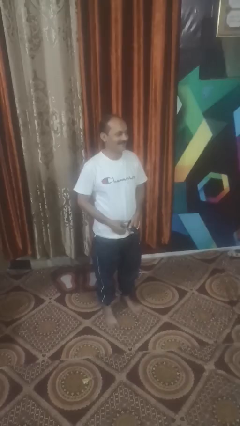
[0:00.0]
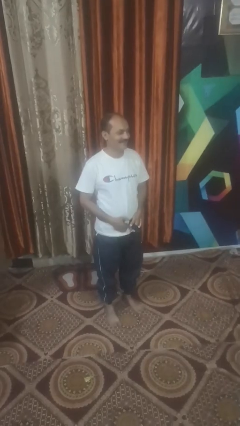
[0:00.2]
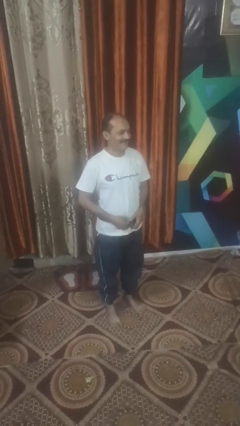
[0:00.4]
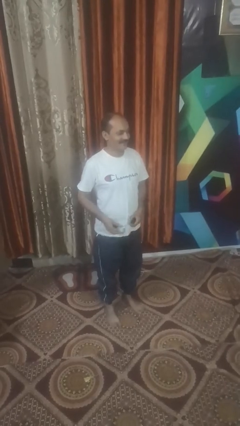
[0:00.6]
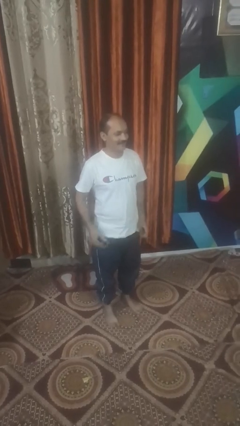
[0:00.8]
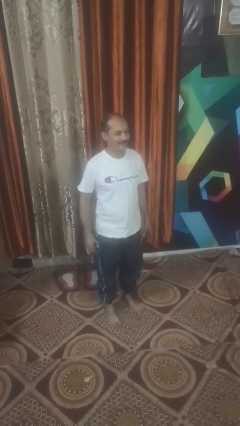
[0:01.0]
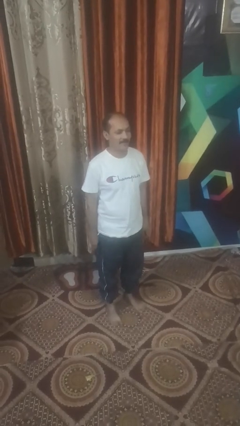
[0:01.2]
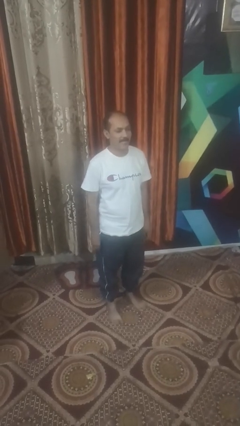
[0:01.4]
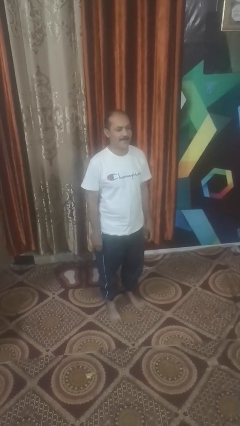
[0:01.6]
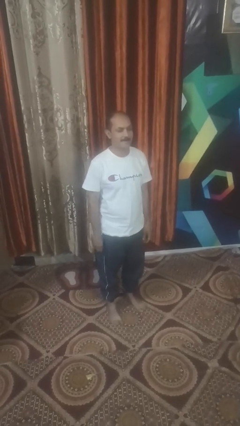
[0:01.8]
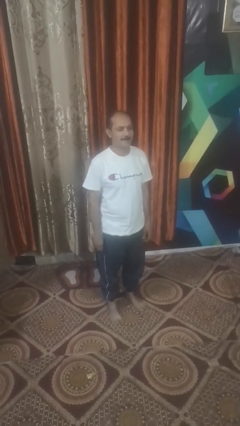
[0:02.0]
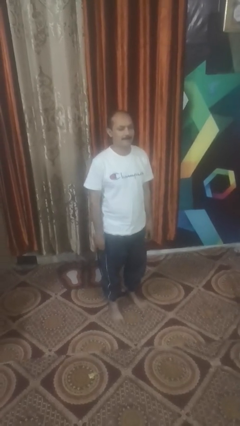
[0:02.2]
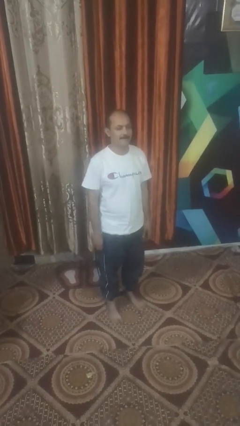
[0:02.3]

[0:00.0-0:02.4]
person takes off belt

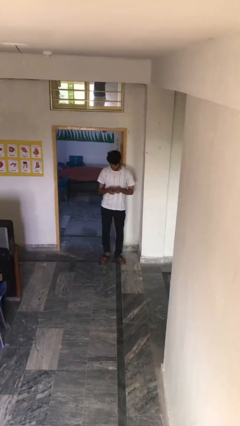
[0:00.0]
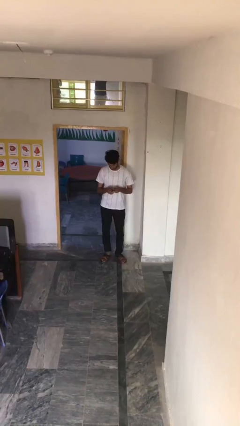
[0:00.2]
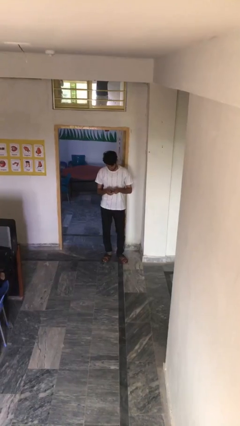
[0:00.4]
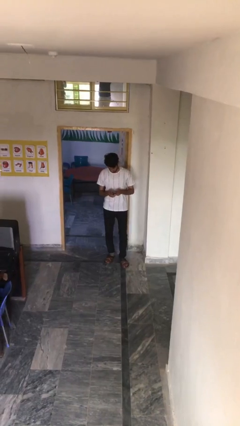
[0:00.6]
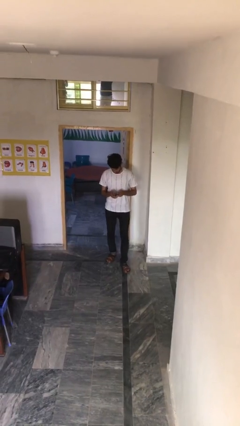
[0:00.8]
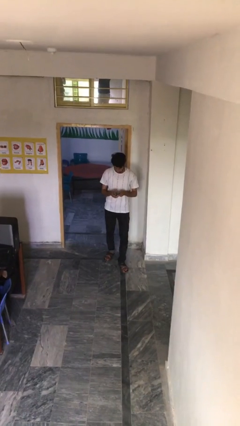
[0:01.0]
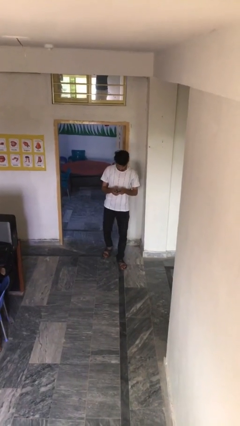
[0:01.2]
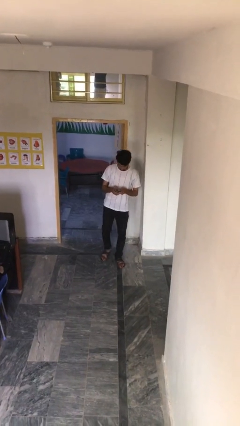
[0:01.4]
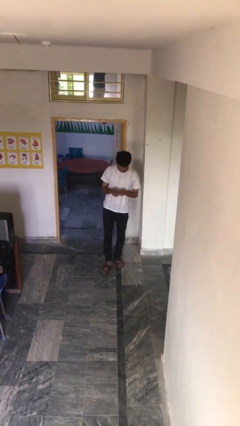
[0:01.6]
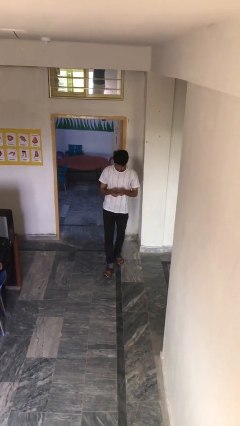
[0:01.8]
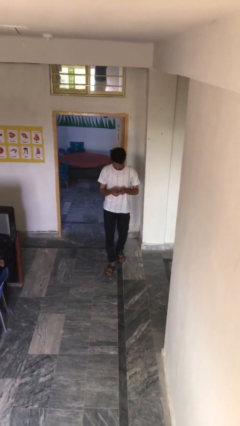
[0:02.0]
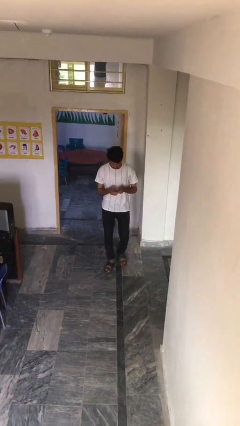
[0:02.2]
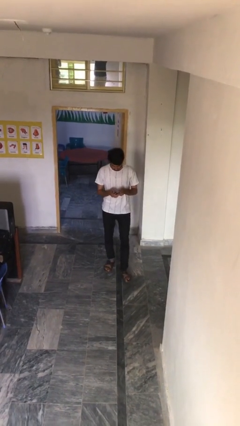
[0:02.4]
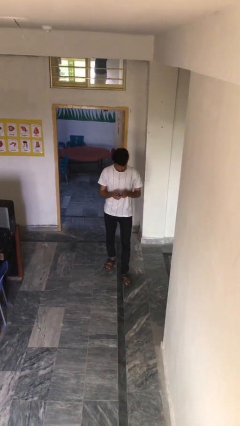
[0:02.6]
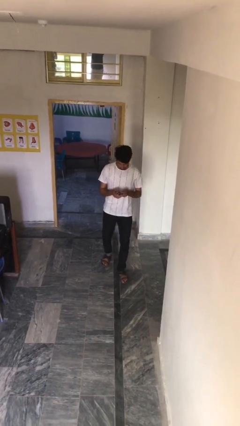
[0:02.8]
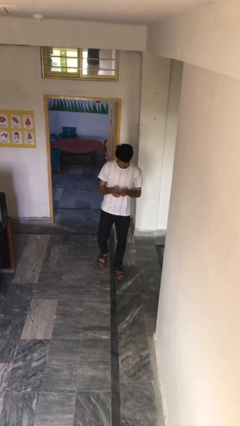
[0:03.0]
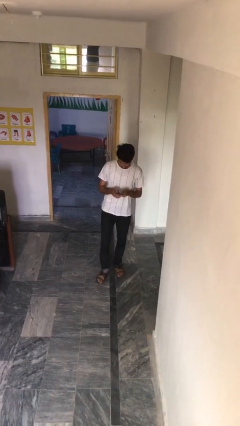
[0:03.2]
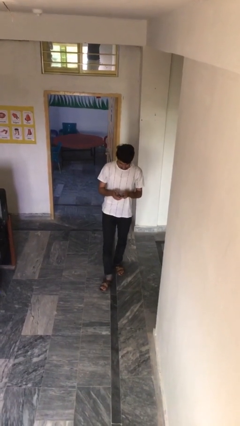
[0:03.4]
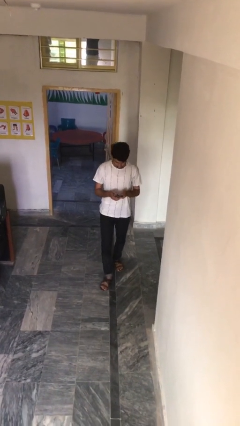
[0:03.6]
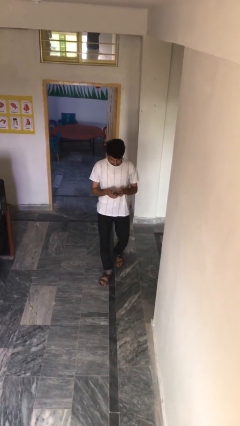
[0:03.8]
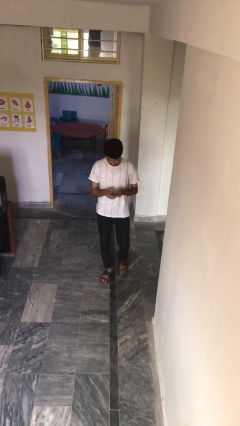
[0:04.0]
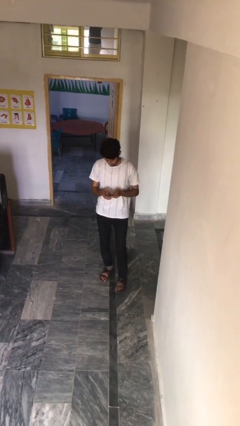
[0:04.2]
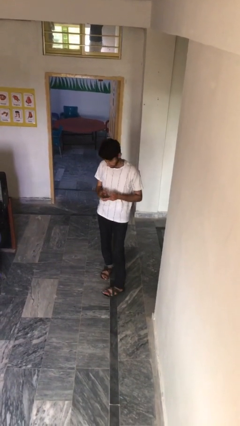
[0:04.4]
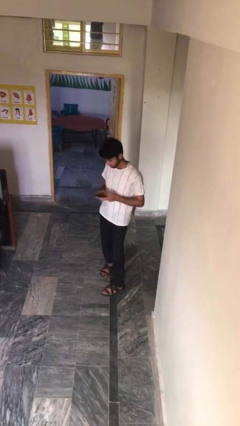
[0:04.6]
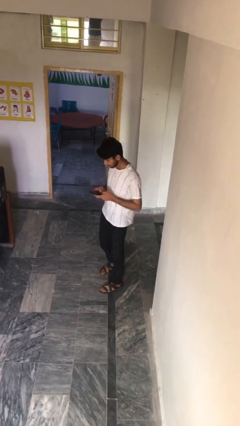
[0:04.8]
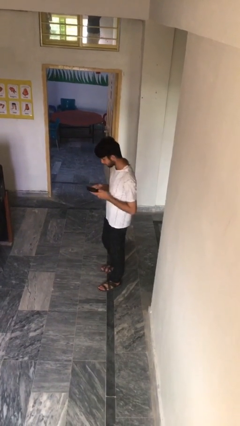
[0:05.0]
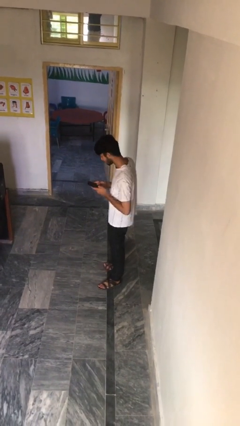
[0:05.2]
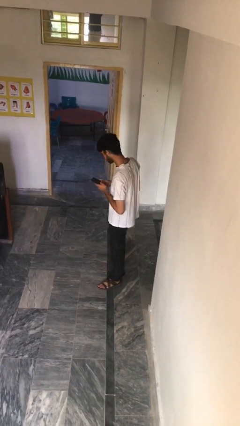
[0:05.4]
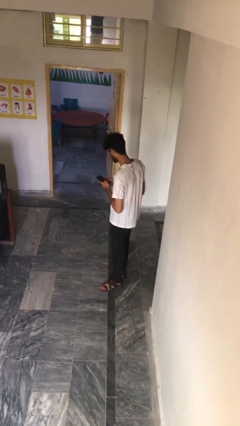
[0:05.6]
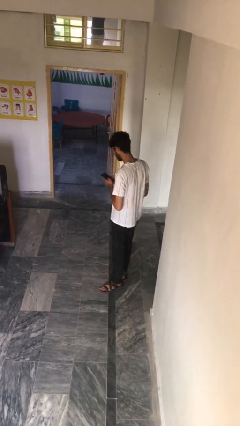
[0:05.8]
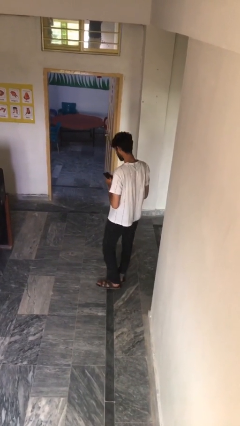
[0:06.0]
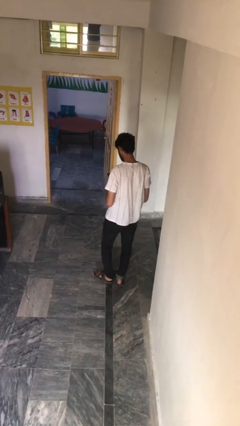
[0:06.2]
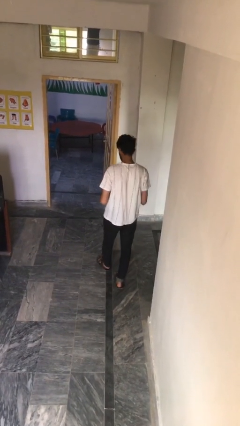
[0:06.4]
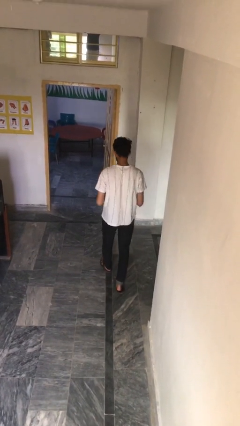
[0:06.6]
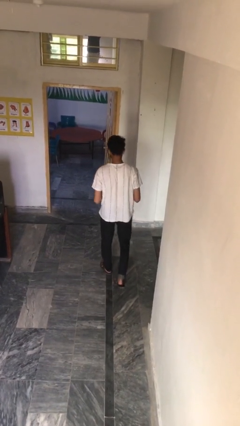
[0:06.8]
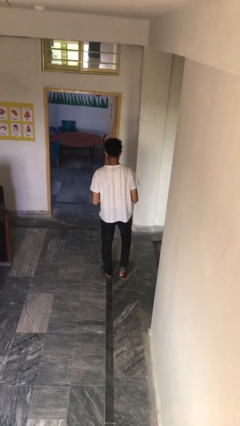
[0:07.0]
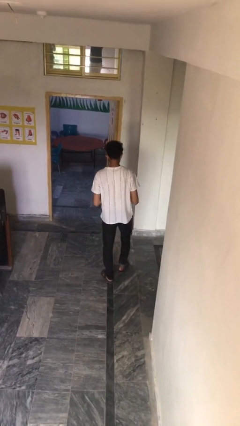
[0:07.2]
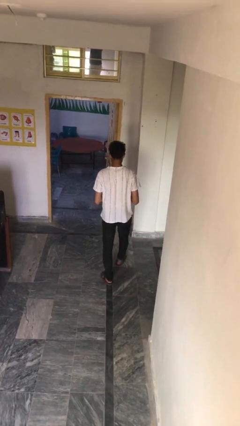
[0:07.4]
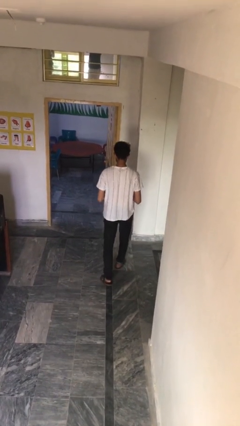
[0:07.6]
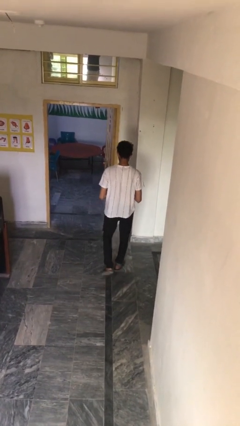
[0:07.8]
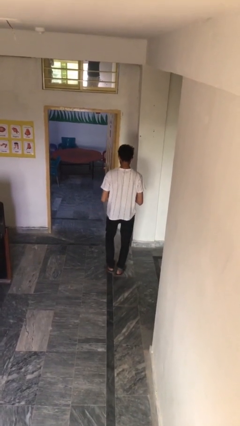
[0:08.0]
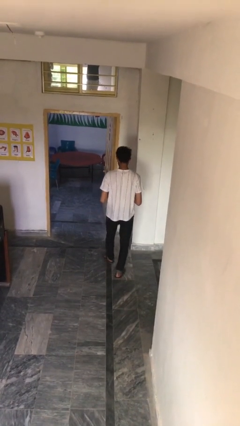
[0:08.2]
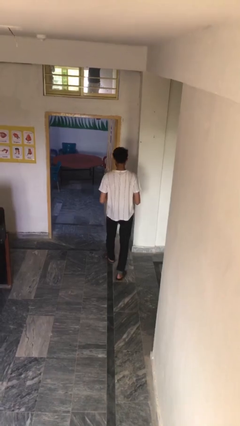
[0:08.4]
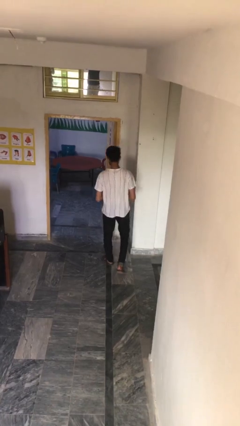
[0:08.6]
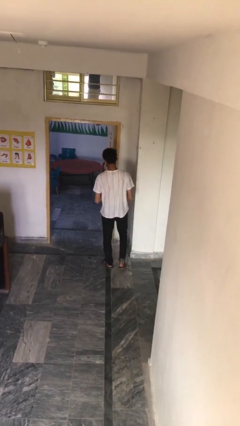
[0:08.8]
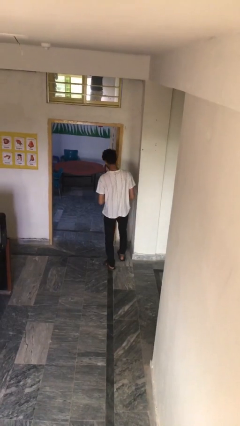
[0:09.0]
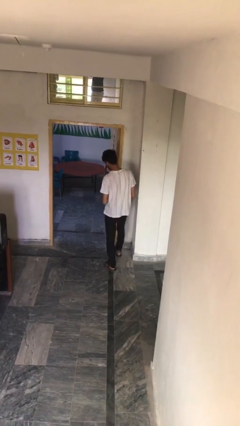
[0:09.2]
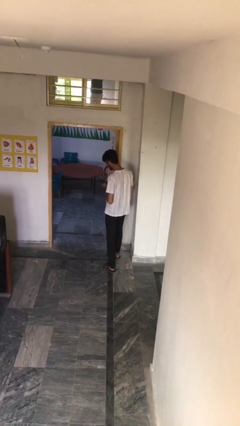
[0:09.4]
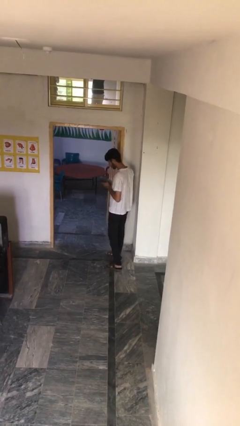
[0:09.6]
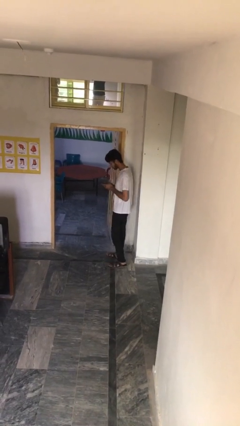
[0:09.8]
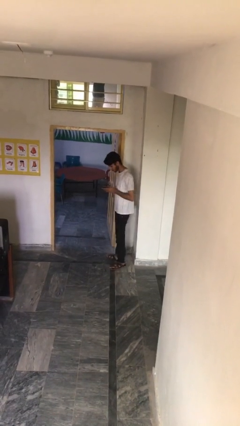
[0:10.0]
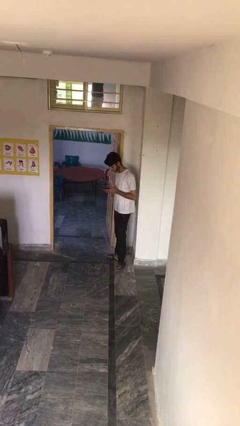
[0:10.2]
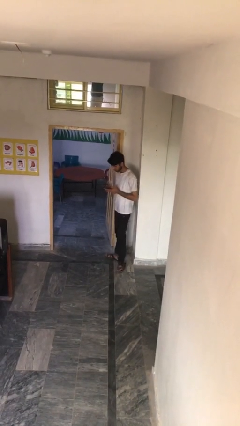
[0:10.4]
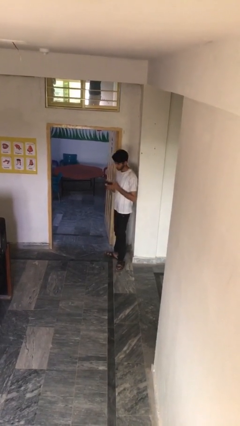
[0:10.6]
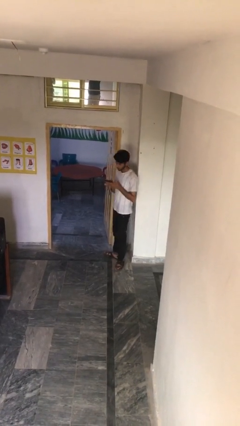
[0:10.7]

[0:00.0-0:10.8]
person texts on phone

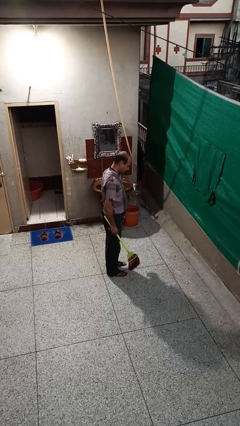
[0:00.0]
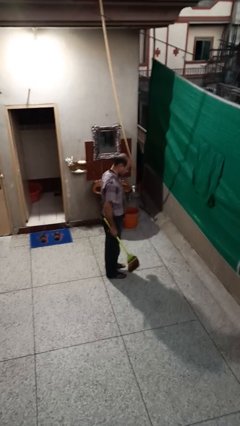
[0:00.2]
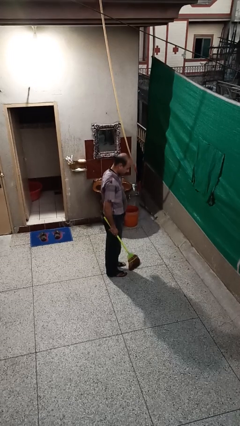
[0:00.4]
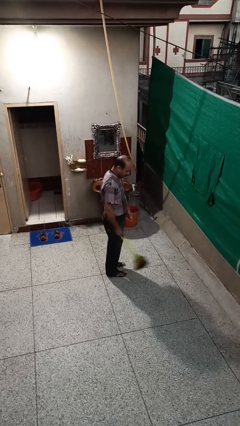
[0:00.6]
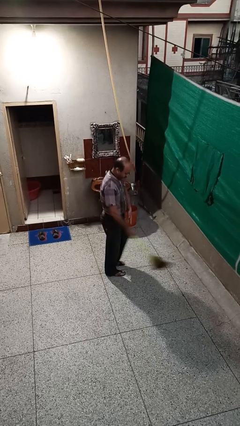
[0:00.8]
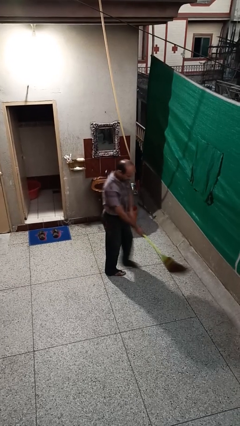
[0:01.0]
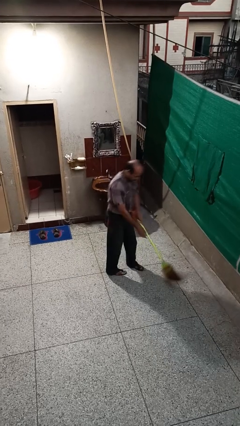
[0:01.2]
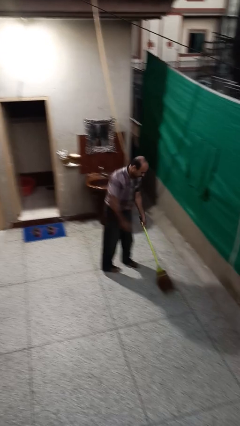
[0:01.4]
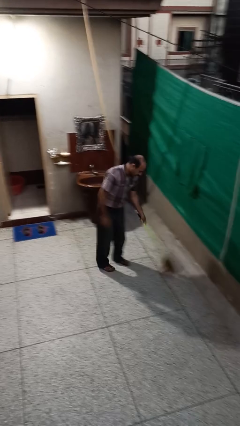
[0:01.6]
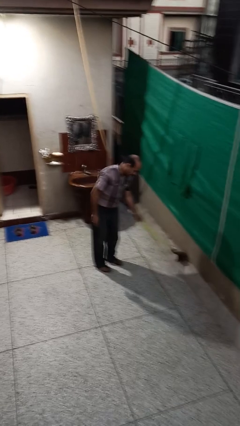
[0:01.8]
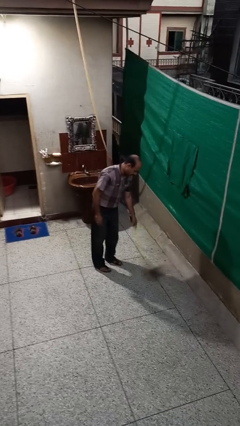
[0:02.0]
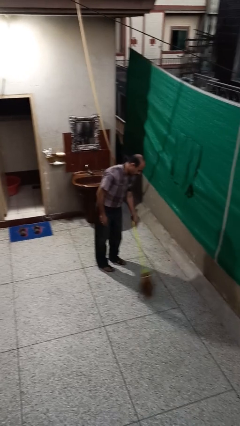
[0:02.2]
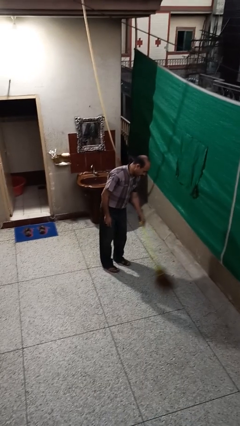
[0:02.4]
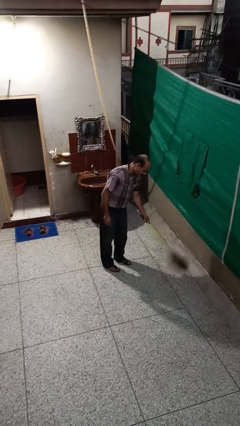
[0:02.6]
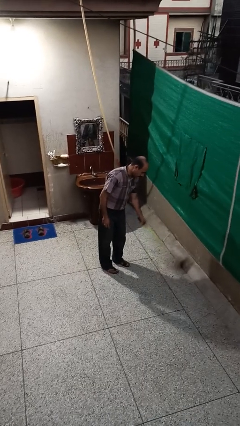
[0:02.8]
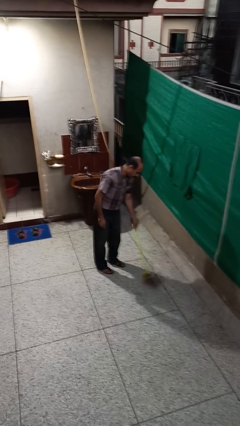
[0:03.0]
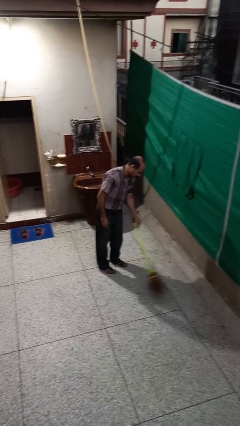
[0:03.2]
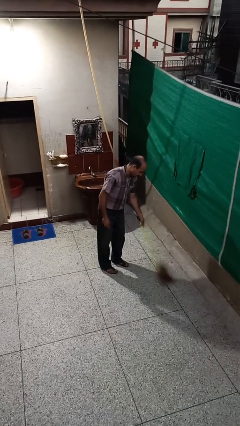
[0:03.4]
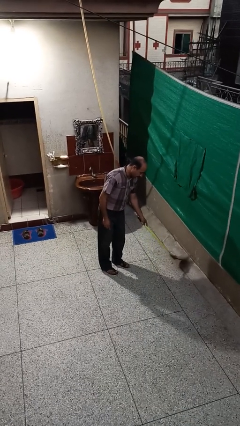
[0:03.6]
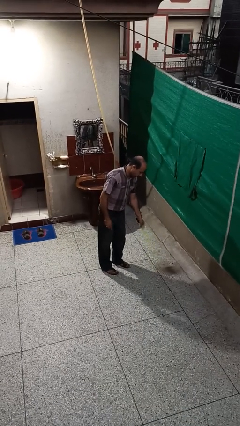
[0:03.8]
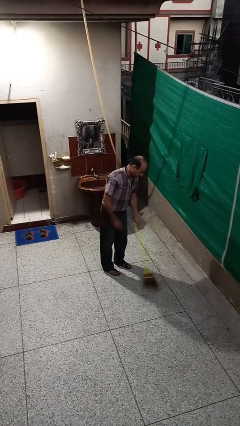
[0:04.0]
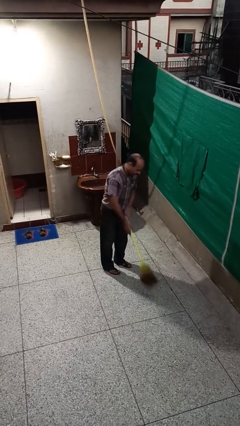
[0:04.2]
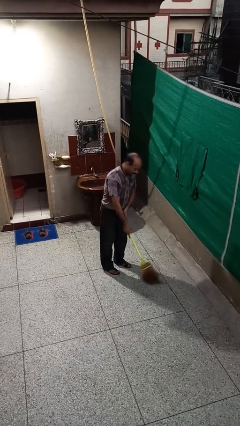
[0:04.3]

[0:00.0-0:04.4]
person sweeps floor

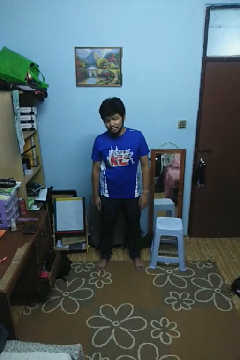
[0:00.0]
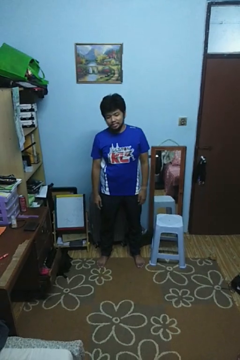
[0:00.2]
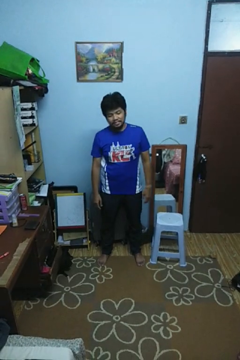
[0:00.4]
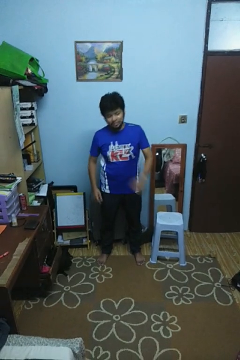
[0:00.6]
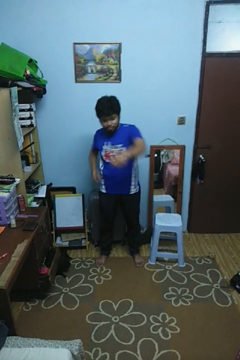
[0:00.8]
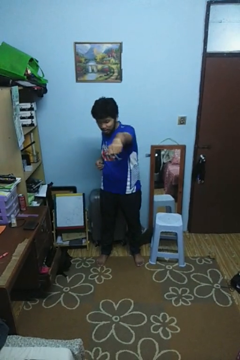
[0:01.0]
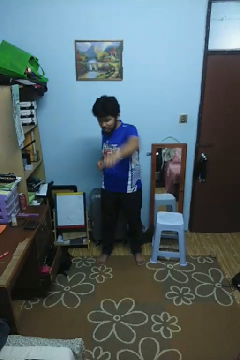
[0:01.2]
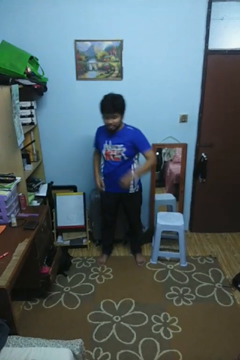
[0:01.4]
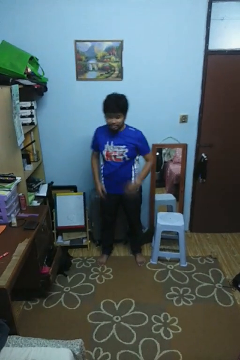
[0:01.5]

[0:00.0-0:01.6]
person punches
